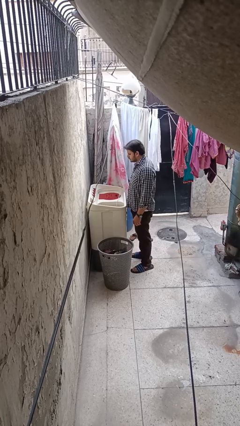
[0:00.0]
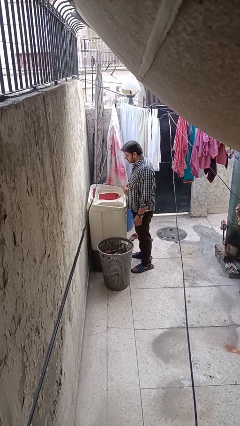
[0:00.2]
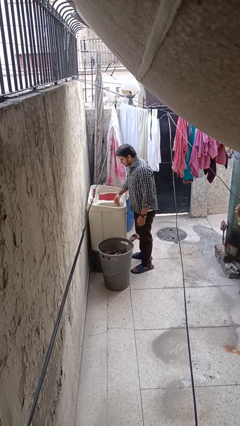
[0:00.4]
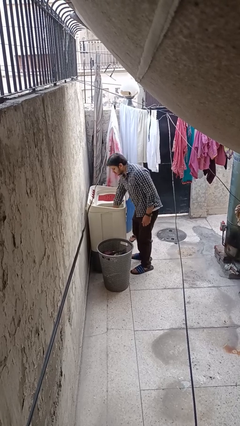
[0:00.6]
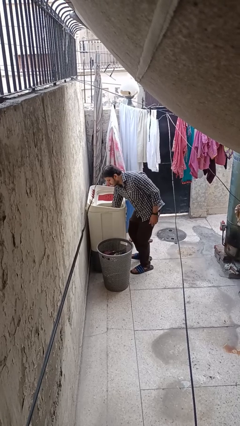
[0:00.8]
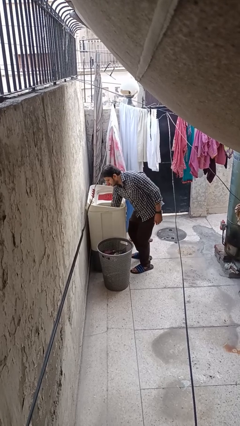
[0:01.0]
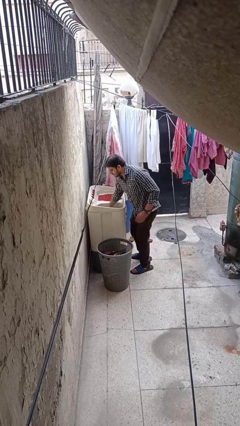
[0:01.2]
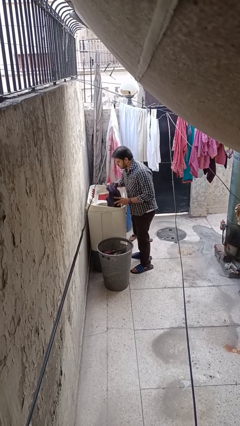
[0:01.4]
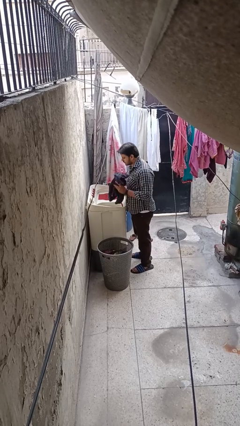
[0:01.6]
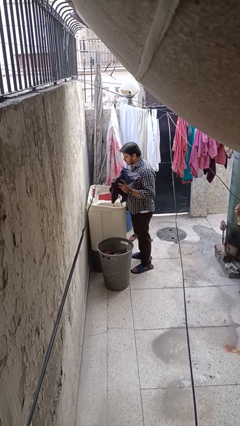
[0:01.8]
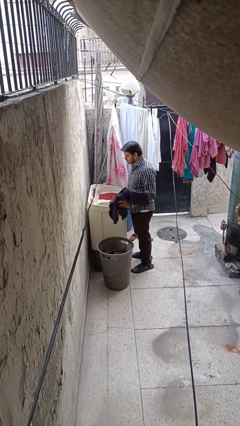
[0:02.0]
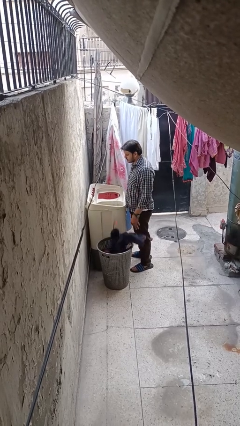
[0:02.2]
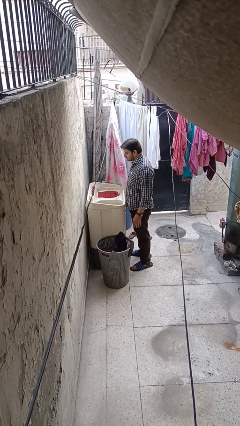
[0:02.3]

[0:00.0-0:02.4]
person loads clotheswasher

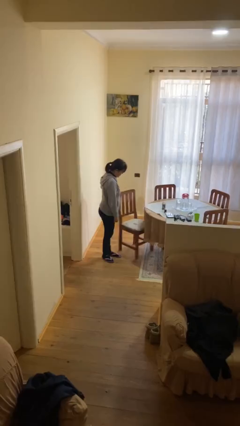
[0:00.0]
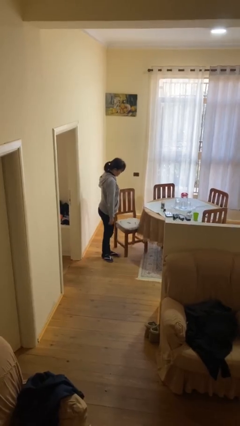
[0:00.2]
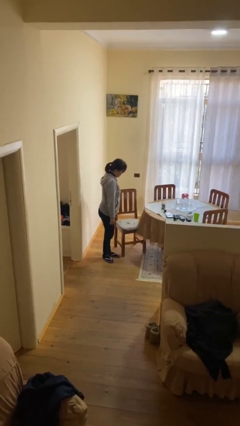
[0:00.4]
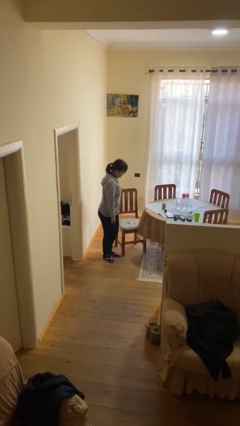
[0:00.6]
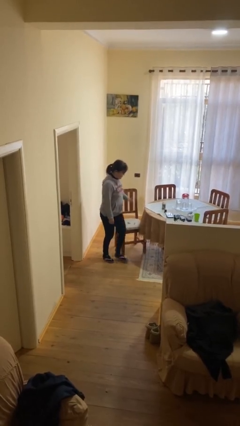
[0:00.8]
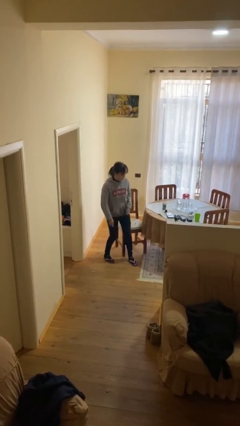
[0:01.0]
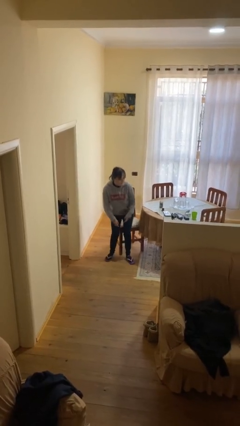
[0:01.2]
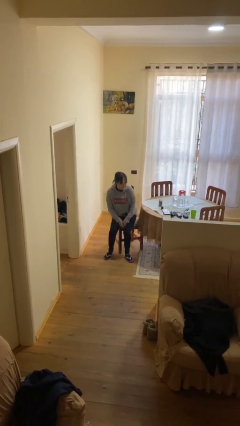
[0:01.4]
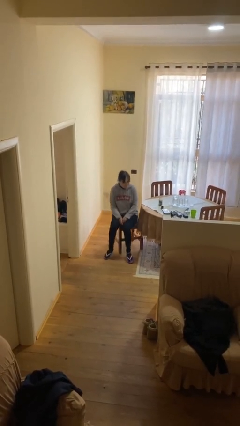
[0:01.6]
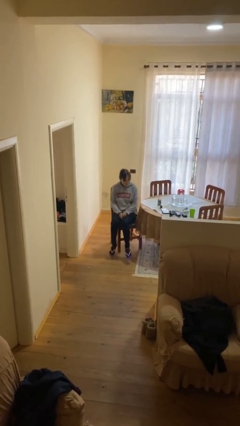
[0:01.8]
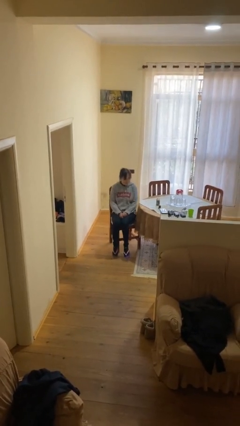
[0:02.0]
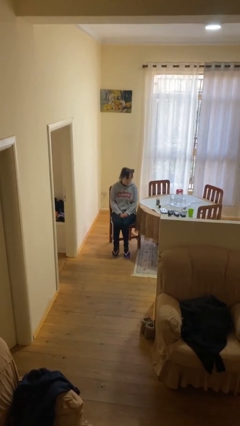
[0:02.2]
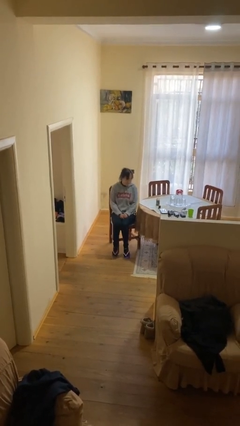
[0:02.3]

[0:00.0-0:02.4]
person sits down

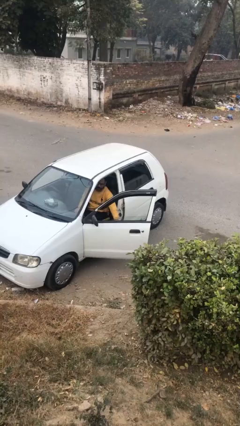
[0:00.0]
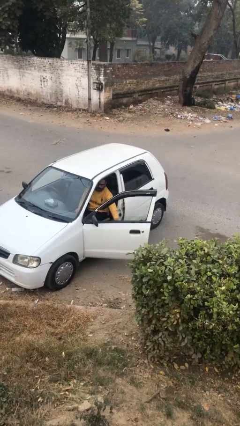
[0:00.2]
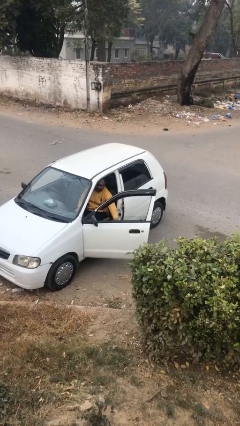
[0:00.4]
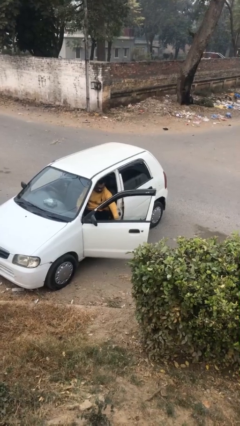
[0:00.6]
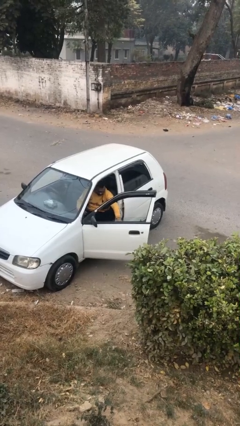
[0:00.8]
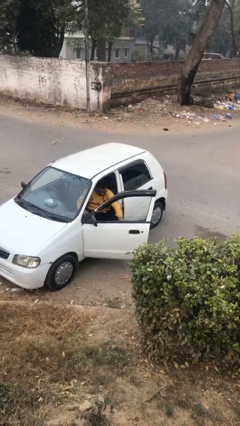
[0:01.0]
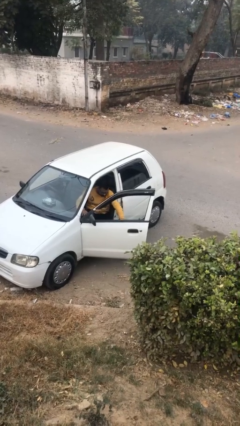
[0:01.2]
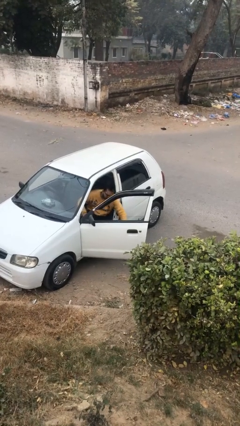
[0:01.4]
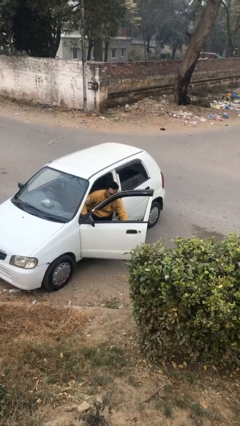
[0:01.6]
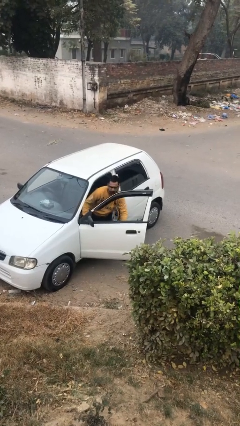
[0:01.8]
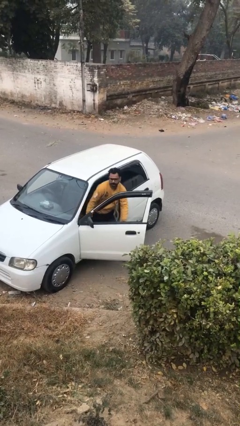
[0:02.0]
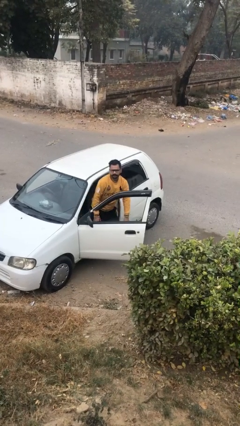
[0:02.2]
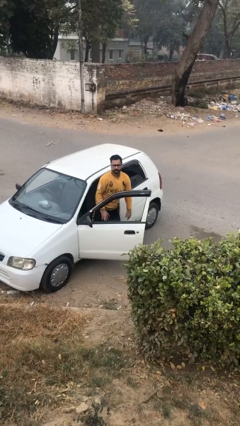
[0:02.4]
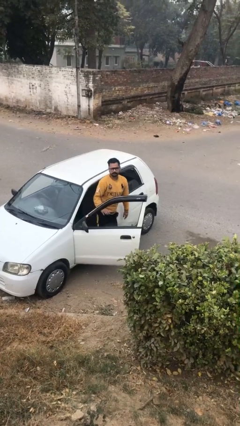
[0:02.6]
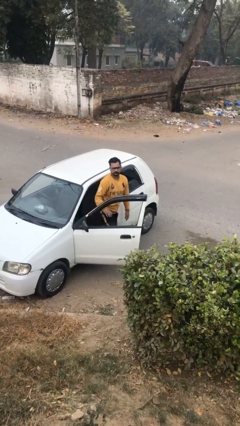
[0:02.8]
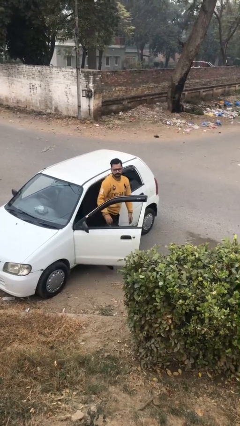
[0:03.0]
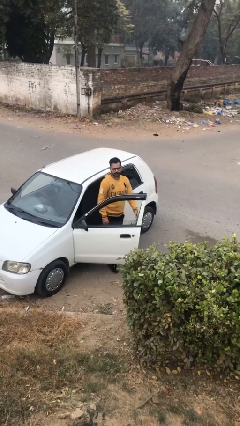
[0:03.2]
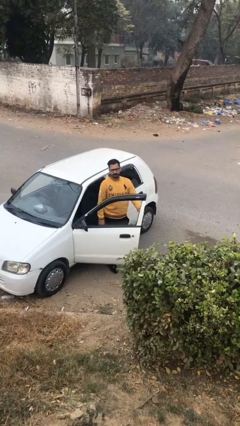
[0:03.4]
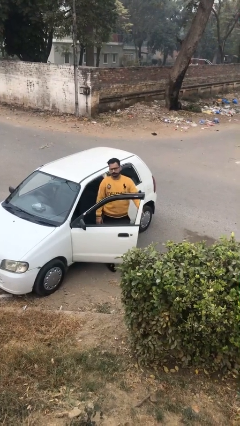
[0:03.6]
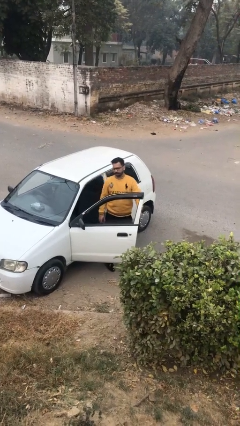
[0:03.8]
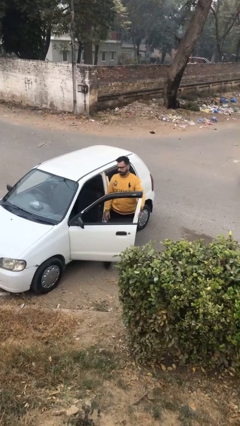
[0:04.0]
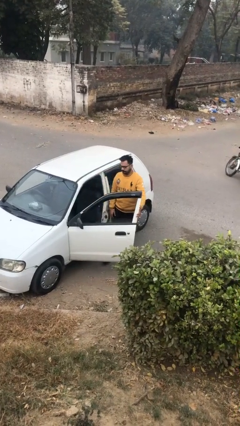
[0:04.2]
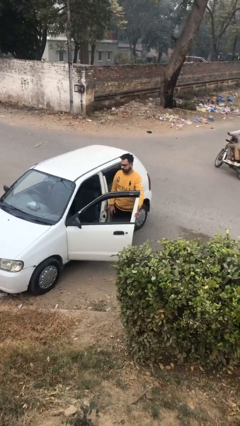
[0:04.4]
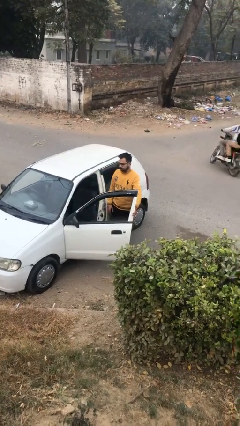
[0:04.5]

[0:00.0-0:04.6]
person exits car

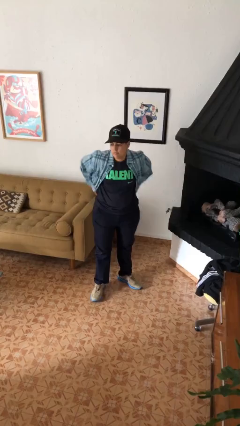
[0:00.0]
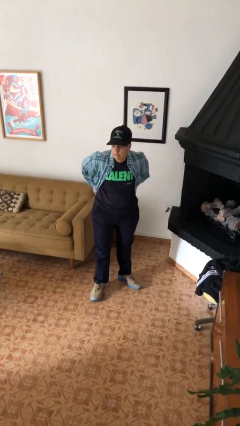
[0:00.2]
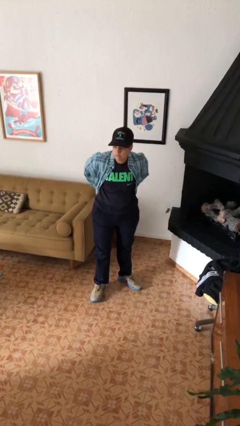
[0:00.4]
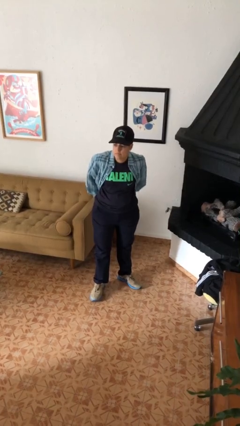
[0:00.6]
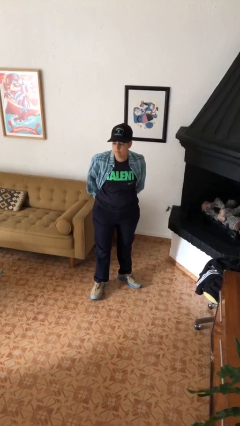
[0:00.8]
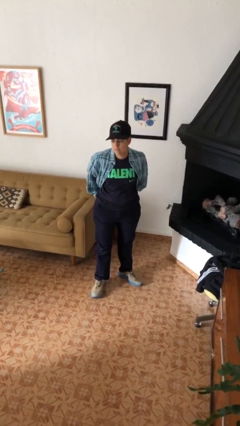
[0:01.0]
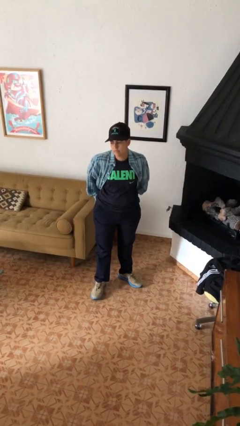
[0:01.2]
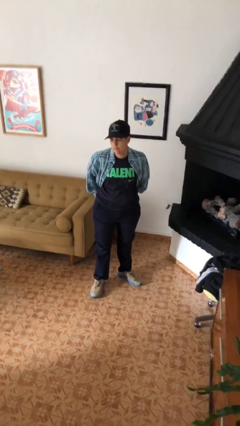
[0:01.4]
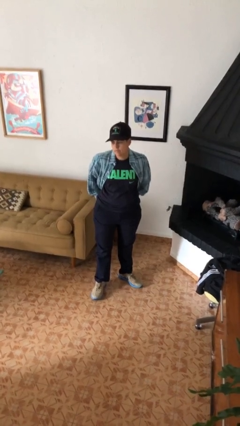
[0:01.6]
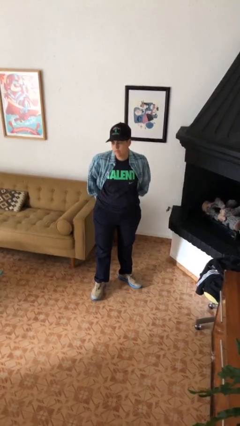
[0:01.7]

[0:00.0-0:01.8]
person puts hands in back pockets

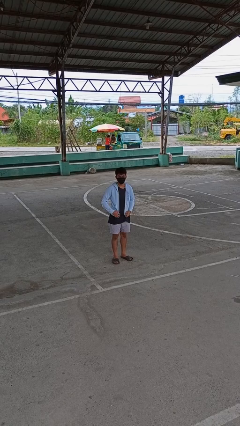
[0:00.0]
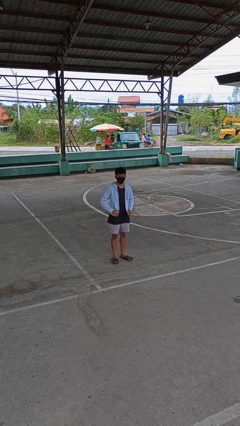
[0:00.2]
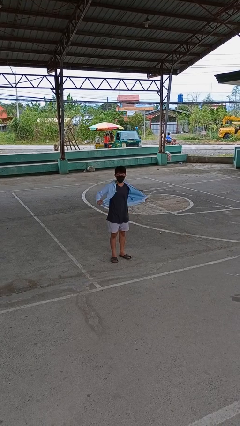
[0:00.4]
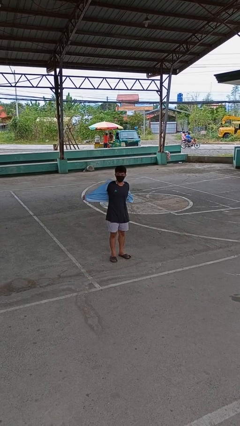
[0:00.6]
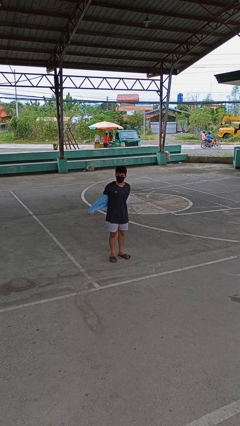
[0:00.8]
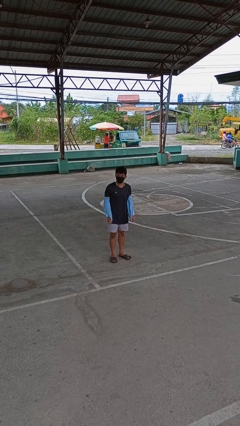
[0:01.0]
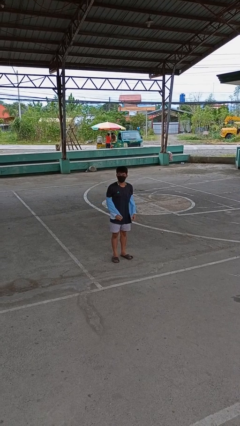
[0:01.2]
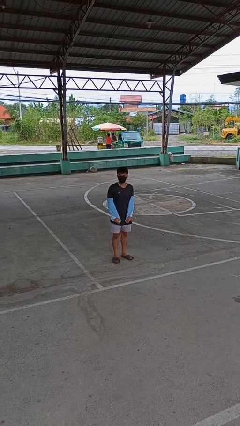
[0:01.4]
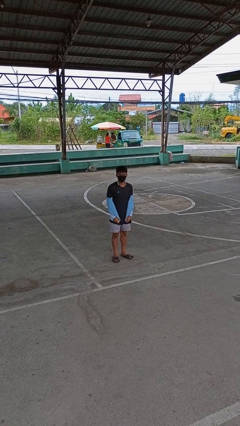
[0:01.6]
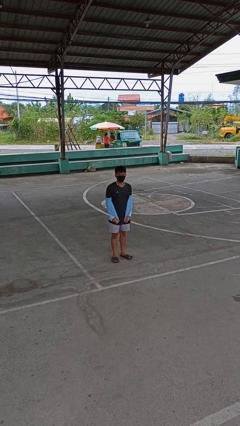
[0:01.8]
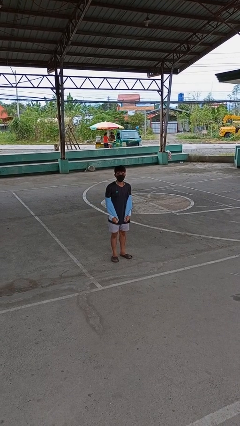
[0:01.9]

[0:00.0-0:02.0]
person takes off jacket

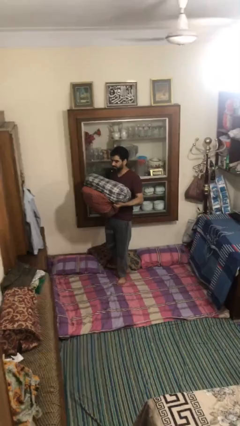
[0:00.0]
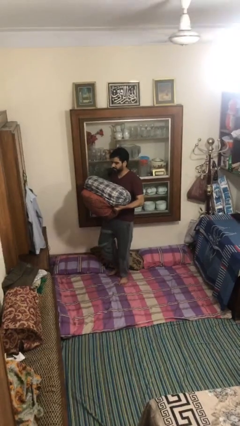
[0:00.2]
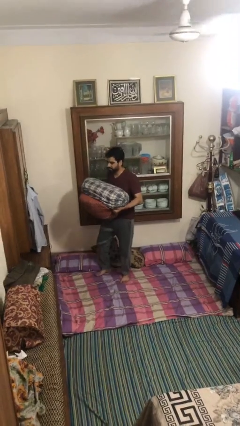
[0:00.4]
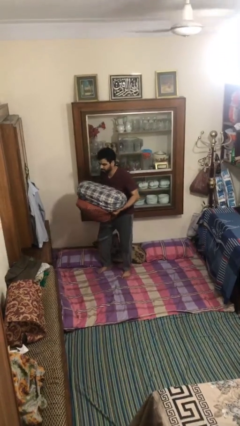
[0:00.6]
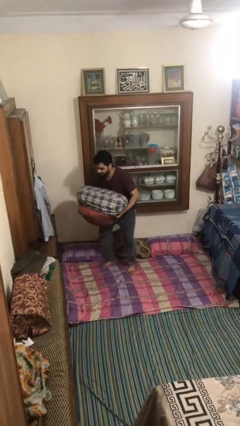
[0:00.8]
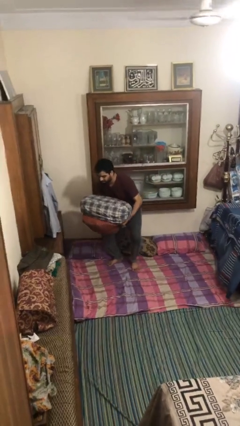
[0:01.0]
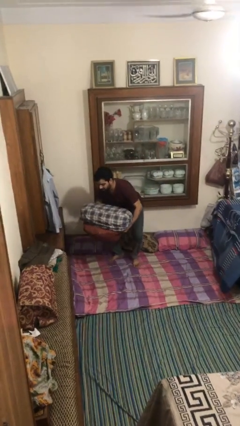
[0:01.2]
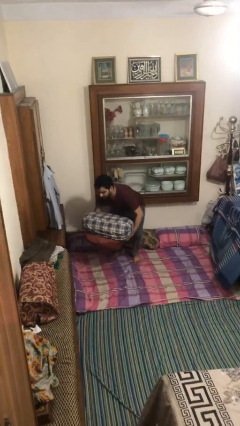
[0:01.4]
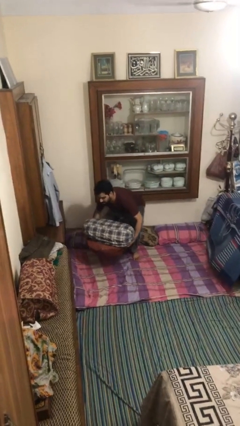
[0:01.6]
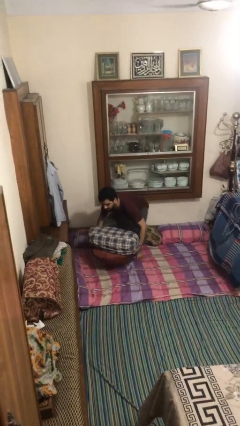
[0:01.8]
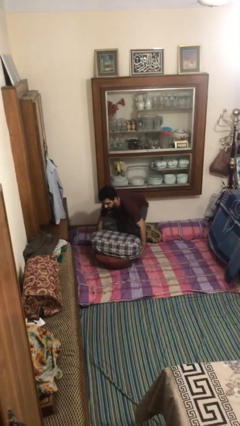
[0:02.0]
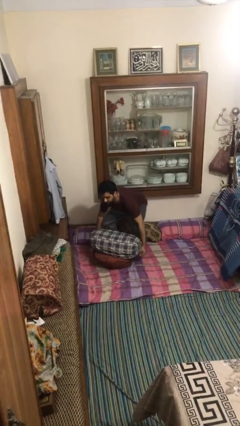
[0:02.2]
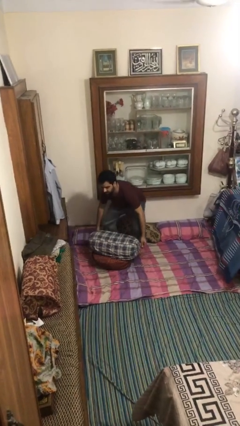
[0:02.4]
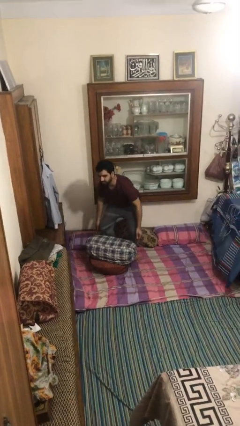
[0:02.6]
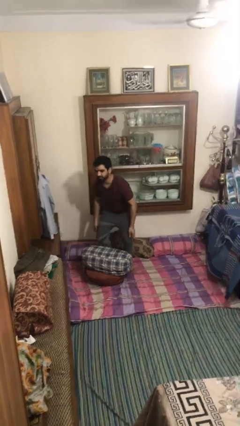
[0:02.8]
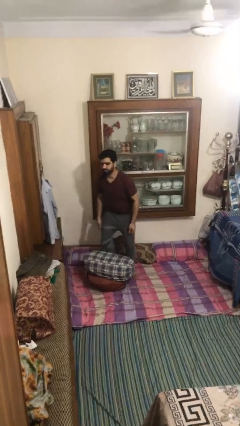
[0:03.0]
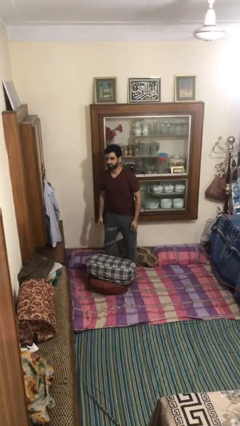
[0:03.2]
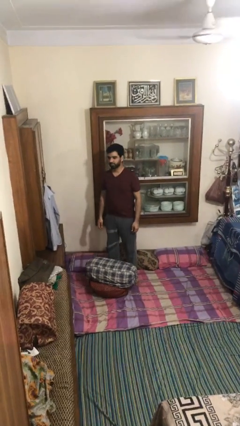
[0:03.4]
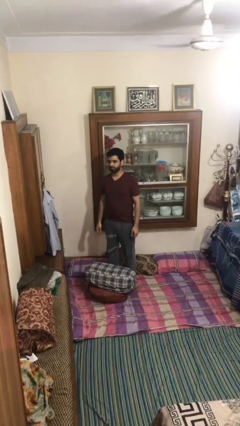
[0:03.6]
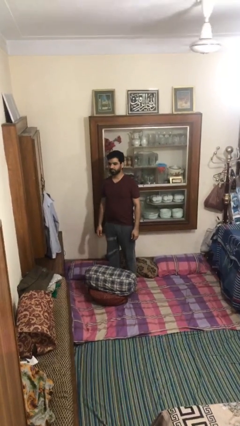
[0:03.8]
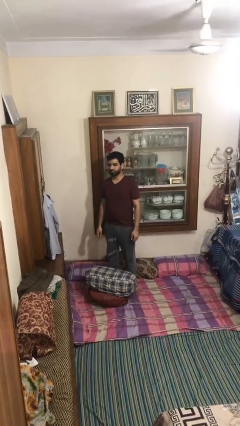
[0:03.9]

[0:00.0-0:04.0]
person puts down object on floor
